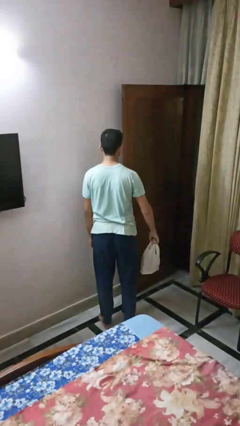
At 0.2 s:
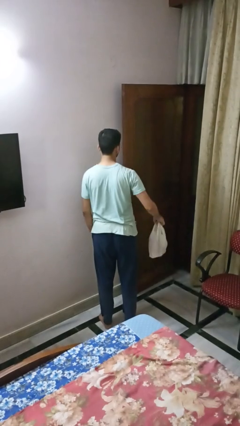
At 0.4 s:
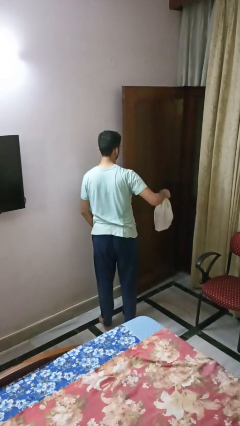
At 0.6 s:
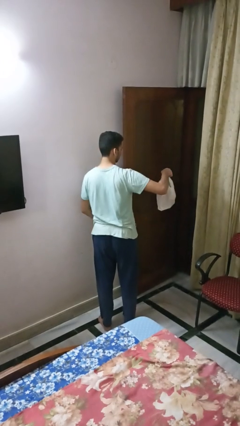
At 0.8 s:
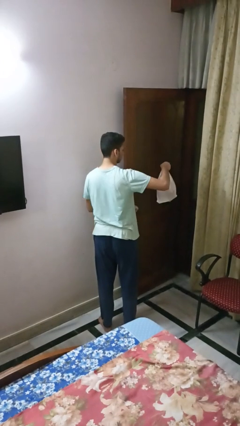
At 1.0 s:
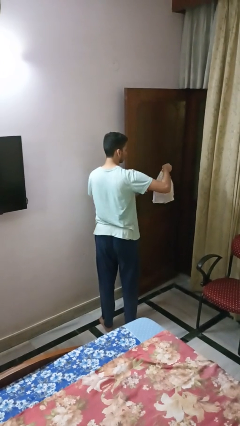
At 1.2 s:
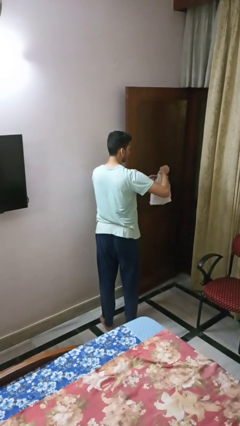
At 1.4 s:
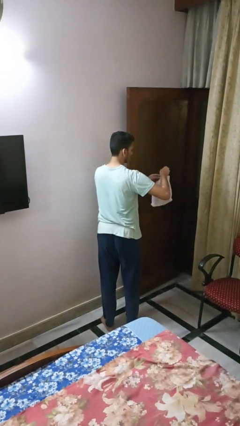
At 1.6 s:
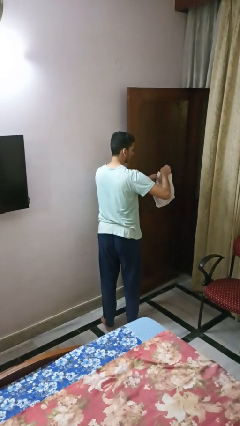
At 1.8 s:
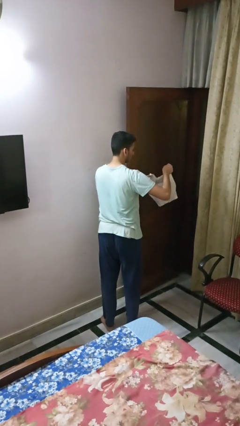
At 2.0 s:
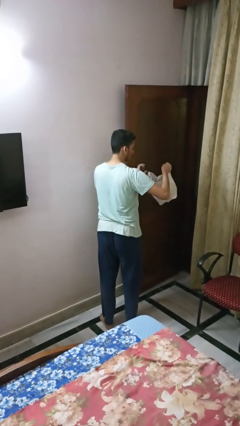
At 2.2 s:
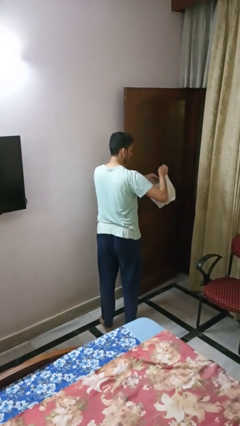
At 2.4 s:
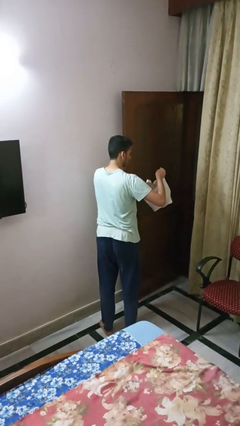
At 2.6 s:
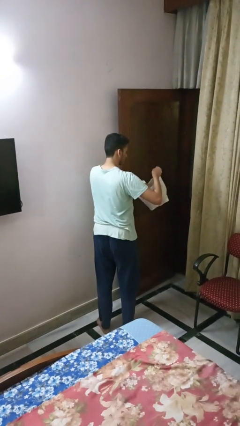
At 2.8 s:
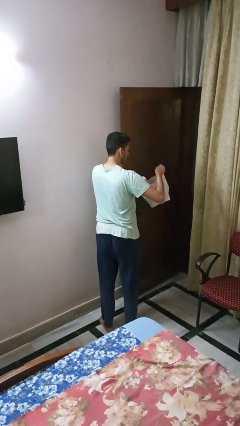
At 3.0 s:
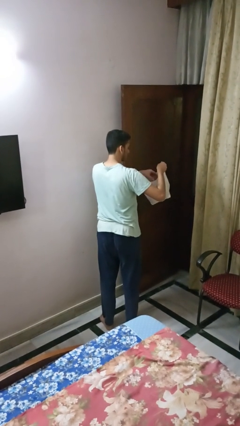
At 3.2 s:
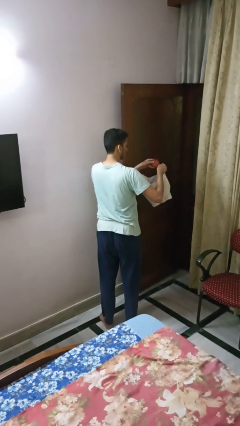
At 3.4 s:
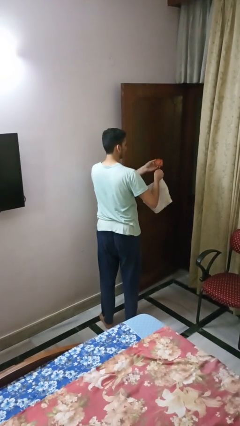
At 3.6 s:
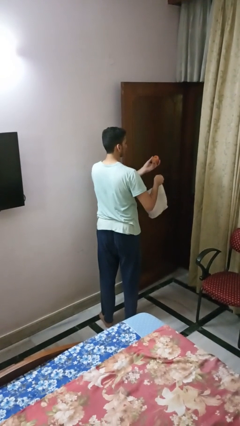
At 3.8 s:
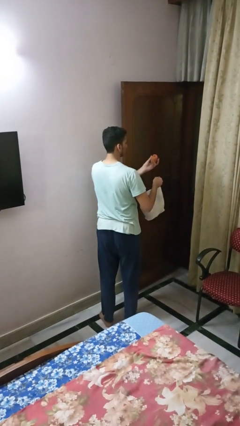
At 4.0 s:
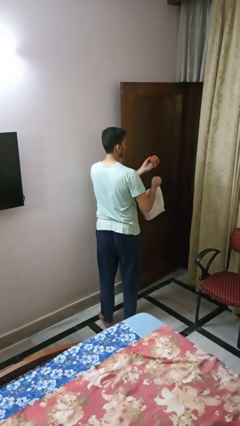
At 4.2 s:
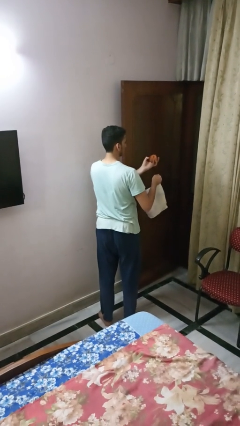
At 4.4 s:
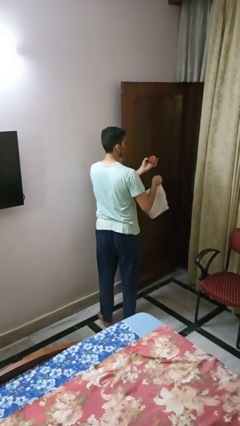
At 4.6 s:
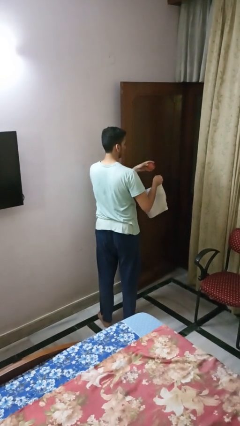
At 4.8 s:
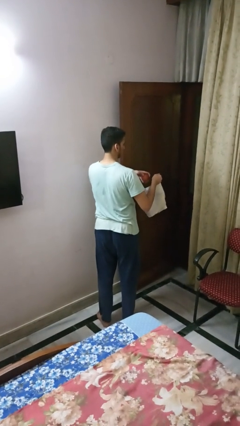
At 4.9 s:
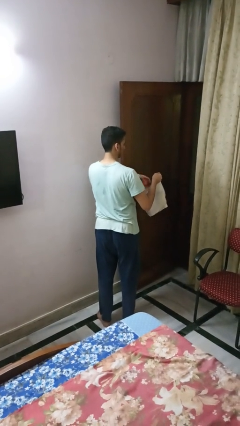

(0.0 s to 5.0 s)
person takes object from bag

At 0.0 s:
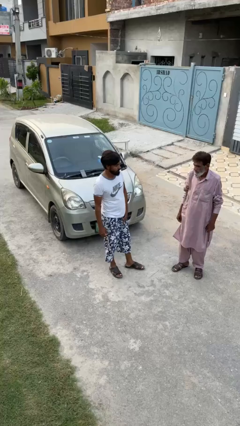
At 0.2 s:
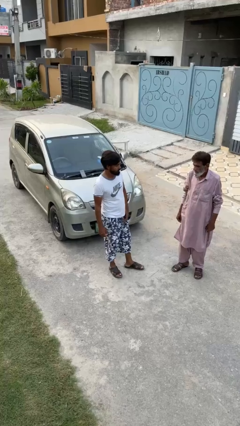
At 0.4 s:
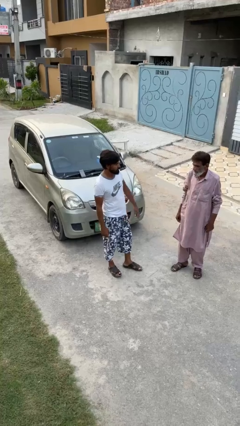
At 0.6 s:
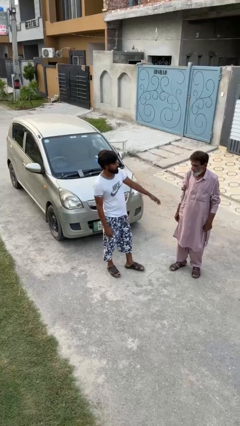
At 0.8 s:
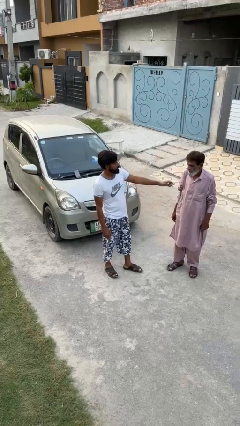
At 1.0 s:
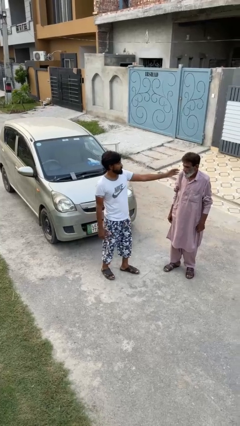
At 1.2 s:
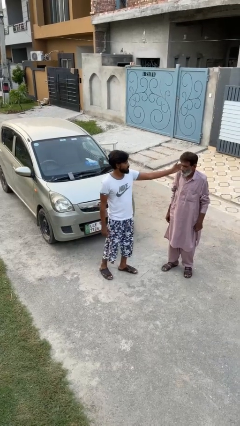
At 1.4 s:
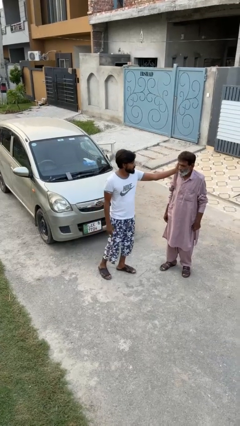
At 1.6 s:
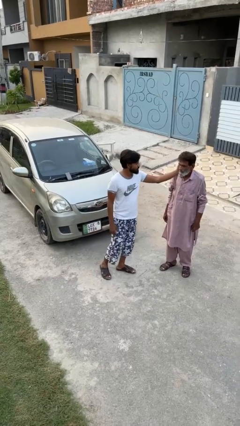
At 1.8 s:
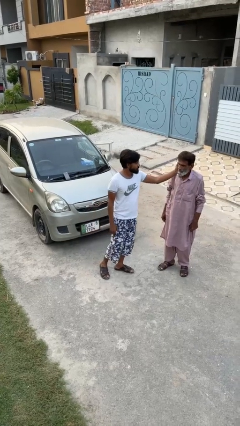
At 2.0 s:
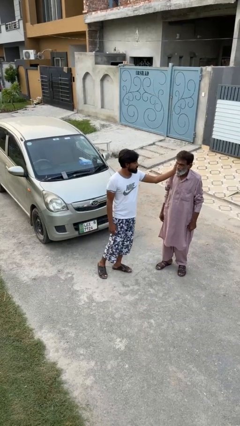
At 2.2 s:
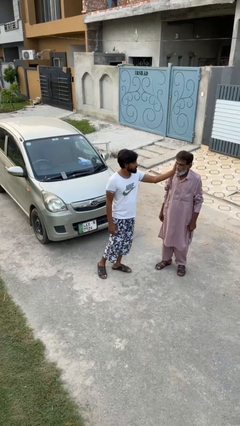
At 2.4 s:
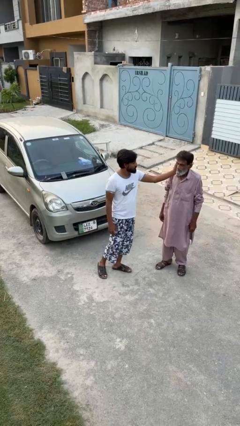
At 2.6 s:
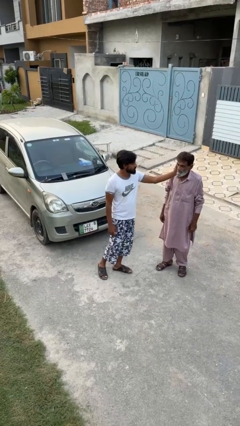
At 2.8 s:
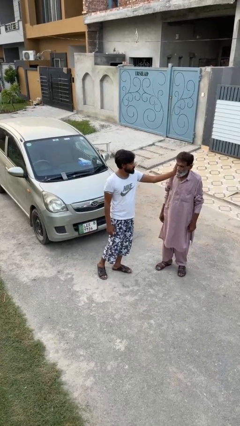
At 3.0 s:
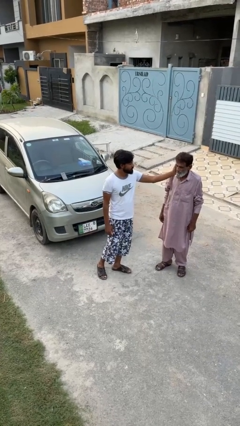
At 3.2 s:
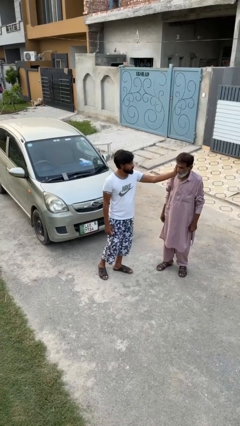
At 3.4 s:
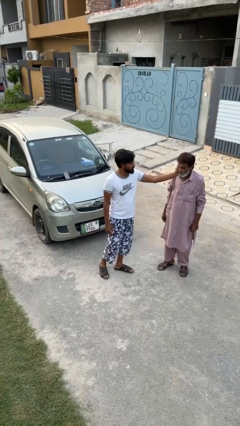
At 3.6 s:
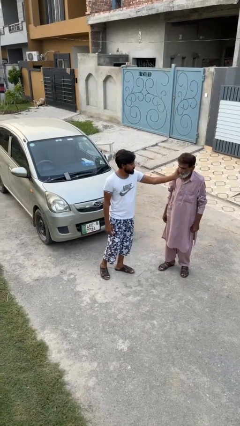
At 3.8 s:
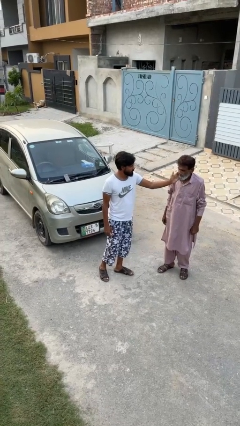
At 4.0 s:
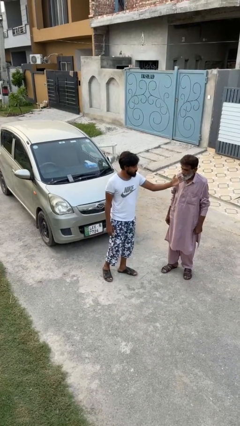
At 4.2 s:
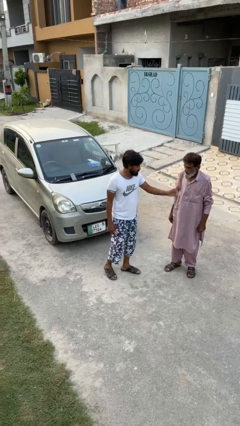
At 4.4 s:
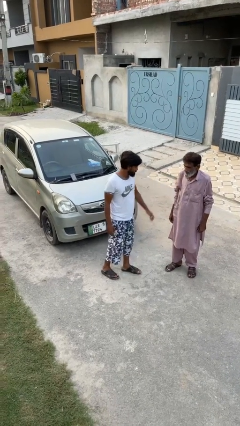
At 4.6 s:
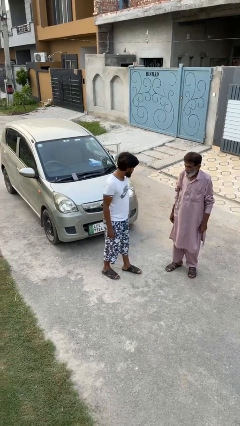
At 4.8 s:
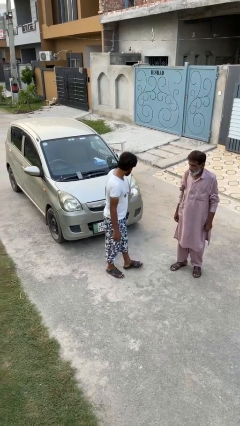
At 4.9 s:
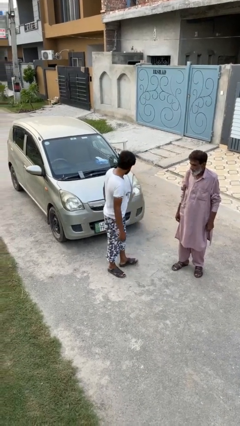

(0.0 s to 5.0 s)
person touches face of person

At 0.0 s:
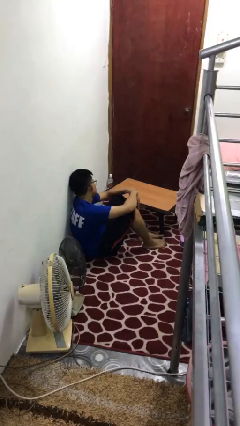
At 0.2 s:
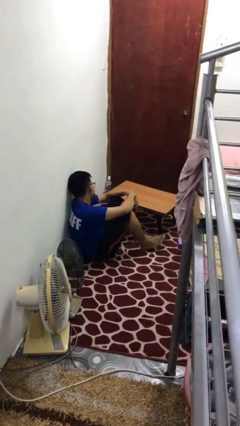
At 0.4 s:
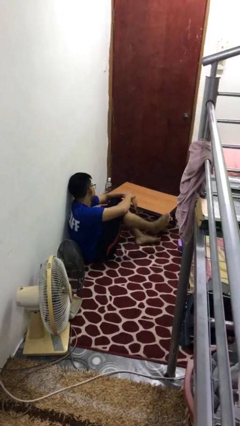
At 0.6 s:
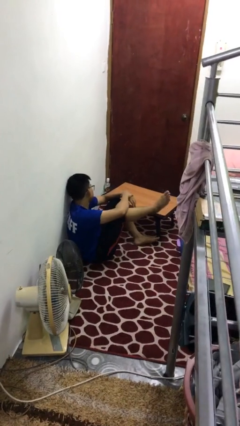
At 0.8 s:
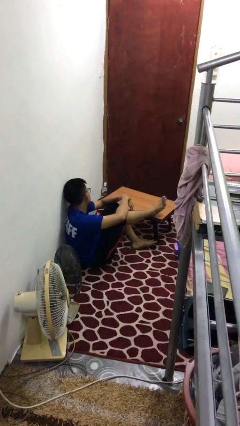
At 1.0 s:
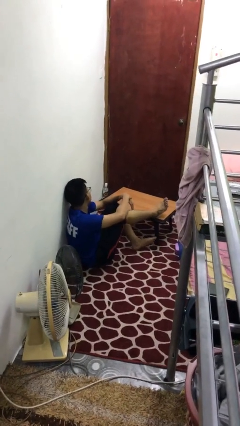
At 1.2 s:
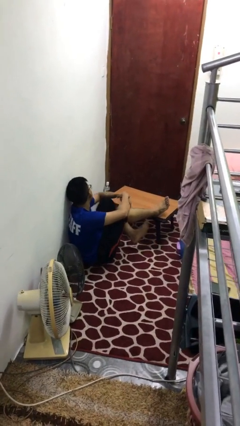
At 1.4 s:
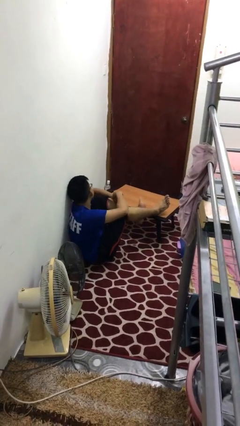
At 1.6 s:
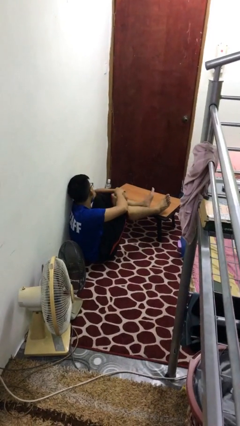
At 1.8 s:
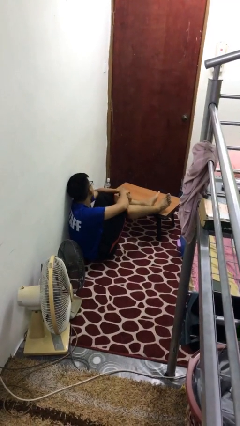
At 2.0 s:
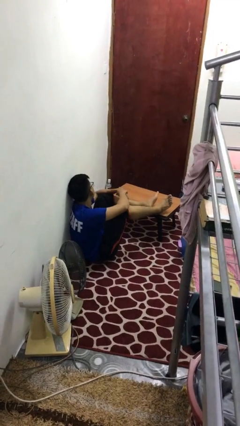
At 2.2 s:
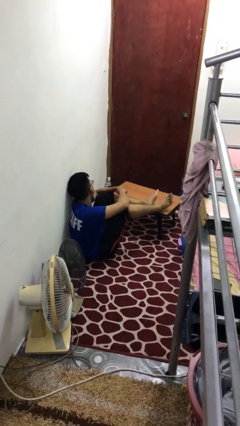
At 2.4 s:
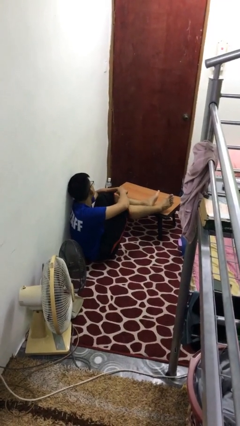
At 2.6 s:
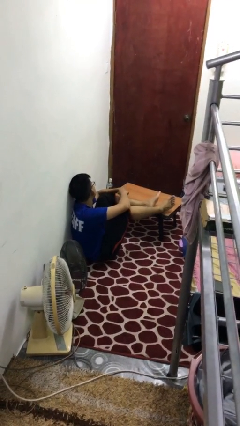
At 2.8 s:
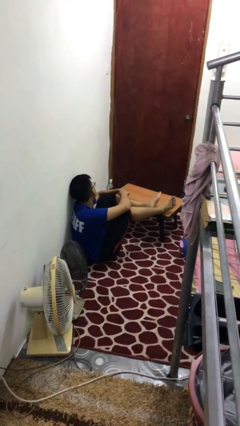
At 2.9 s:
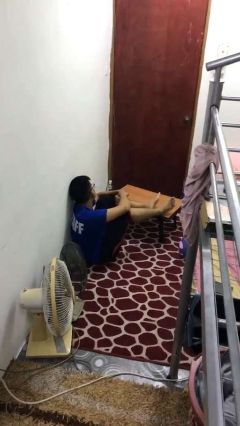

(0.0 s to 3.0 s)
person puts feet up

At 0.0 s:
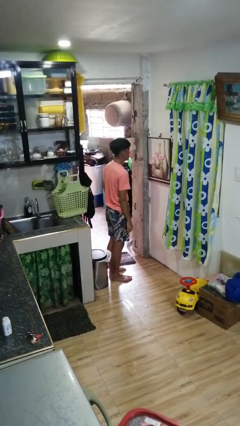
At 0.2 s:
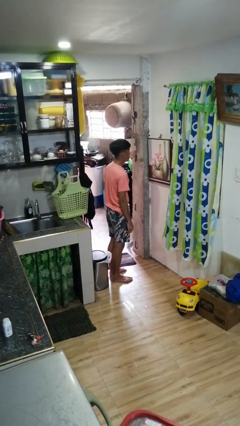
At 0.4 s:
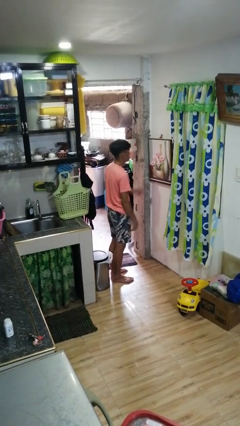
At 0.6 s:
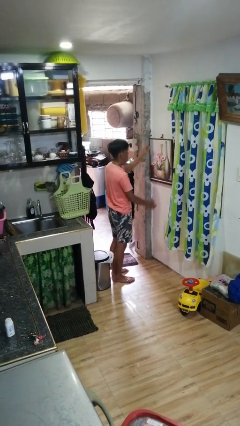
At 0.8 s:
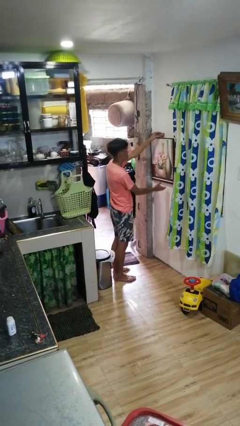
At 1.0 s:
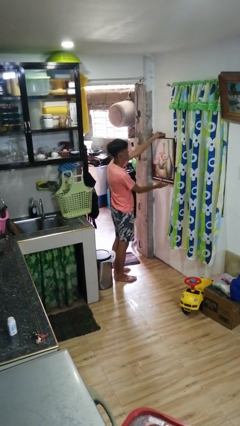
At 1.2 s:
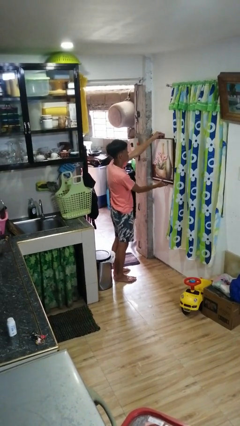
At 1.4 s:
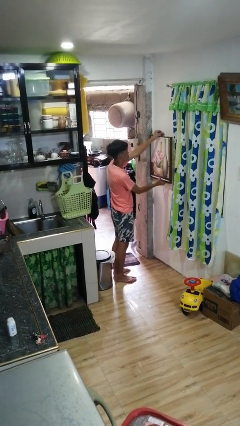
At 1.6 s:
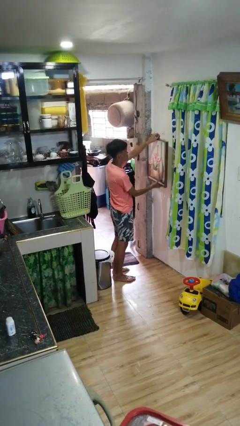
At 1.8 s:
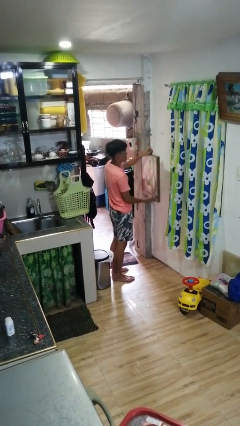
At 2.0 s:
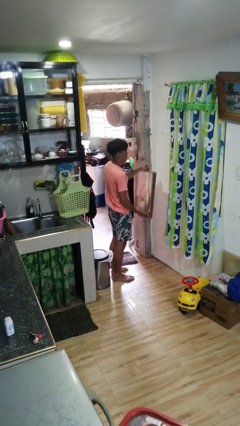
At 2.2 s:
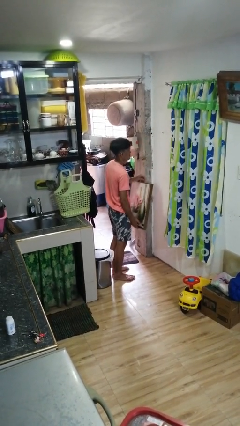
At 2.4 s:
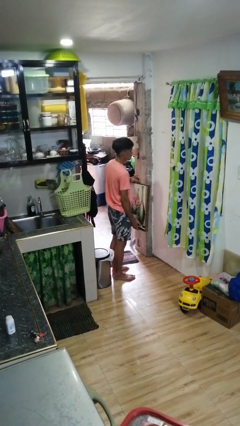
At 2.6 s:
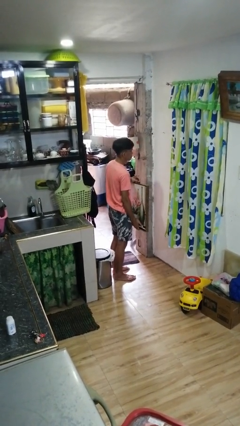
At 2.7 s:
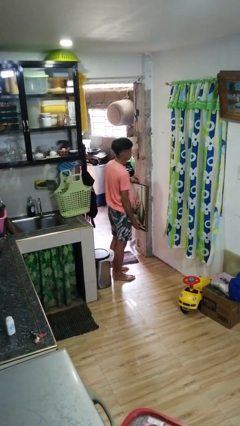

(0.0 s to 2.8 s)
person takes down picture frame

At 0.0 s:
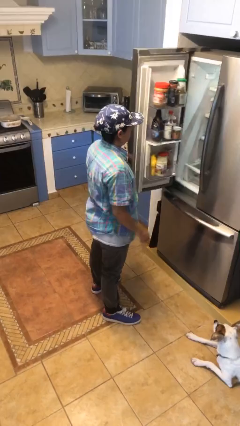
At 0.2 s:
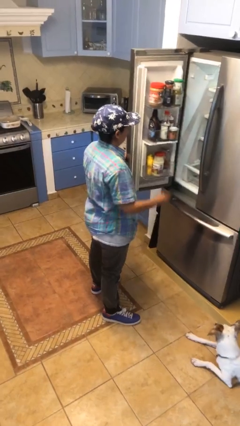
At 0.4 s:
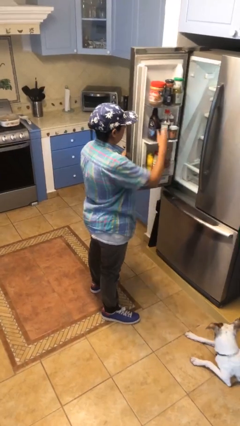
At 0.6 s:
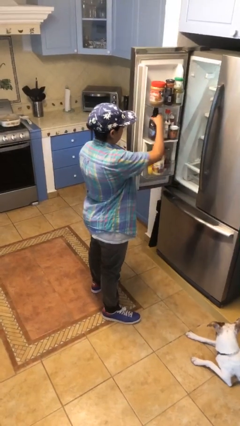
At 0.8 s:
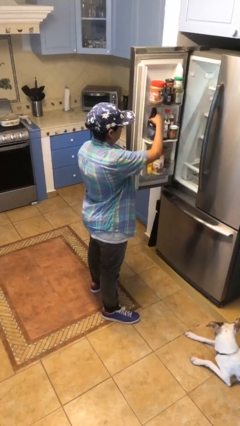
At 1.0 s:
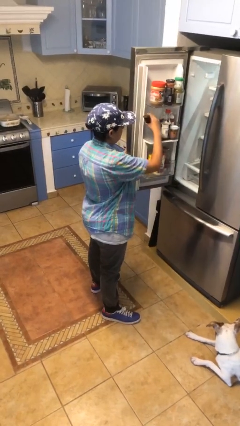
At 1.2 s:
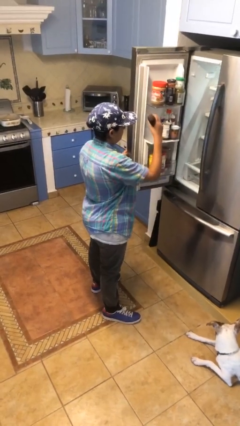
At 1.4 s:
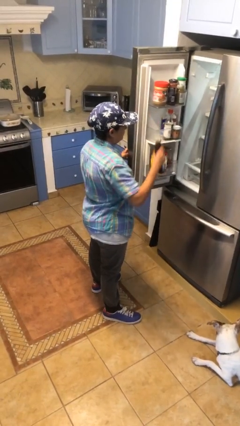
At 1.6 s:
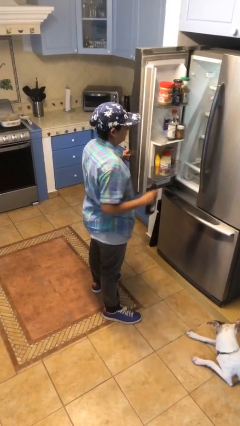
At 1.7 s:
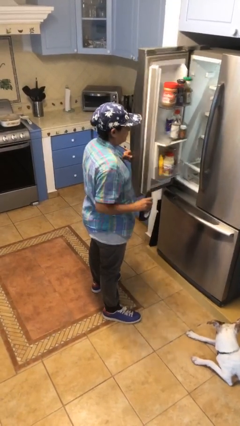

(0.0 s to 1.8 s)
person takes object from refrigerator
